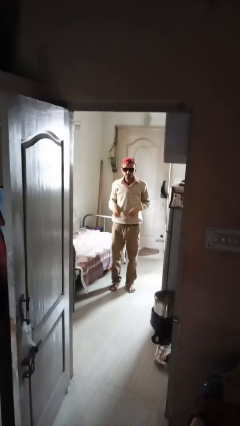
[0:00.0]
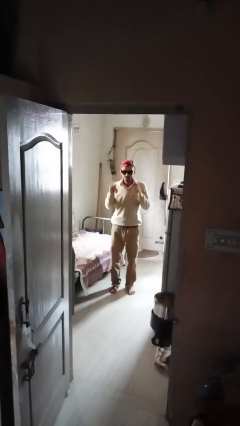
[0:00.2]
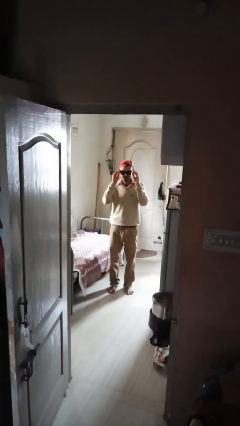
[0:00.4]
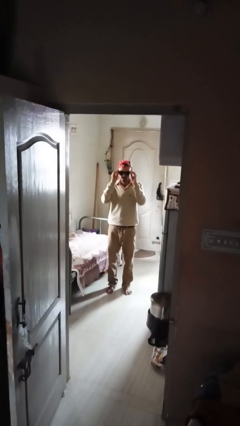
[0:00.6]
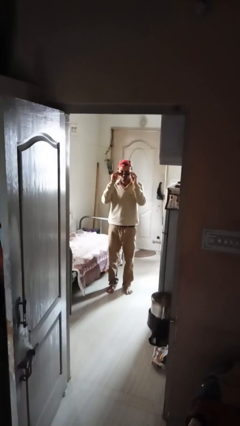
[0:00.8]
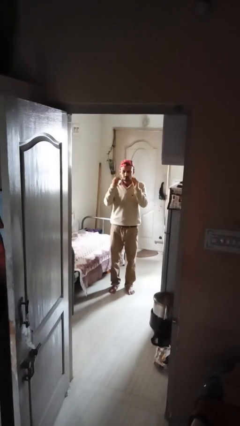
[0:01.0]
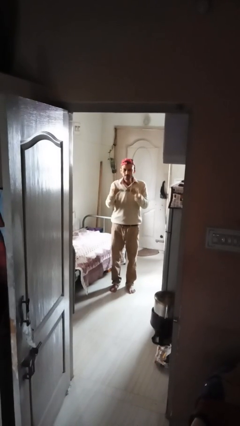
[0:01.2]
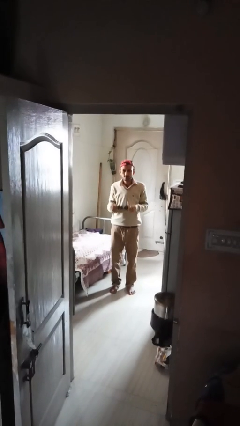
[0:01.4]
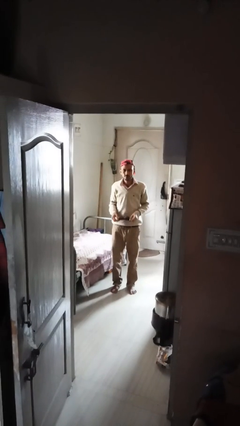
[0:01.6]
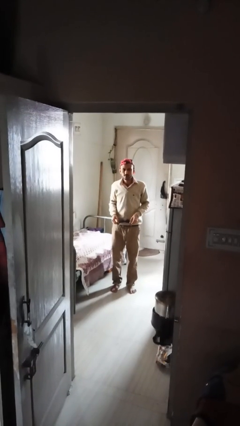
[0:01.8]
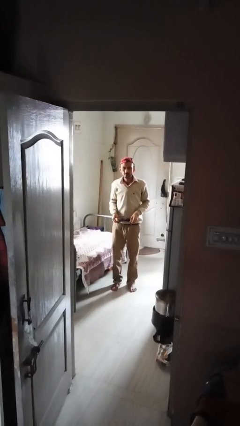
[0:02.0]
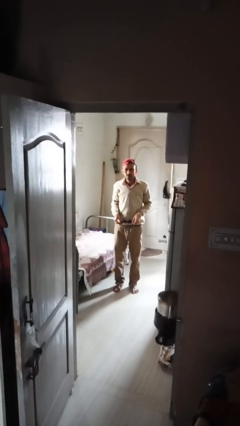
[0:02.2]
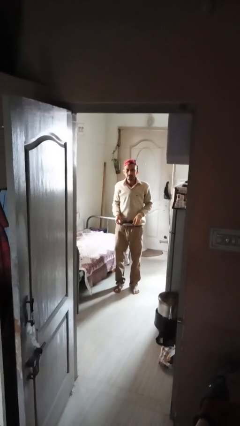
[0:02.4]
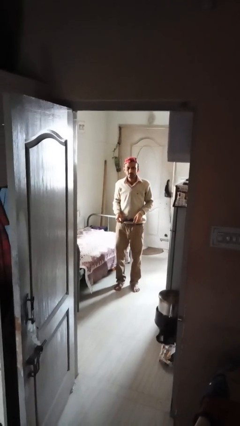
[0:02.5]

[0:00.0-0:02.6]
person takes off sunglasses

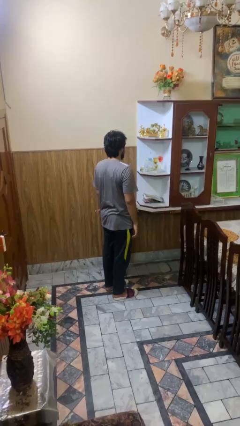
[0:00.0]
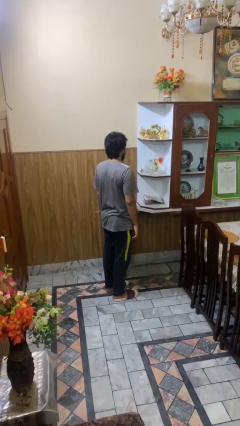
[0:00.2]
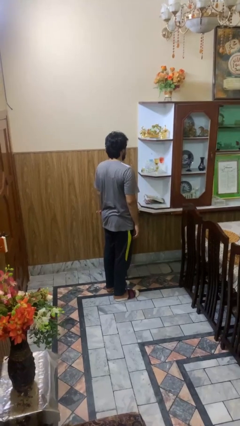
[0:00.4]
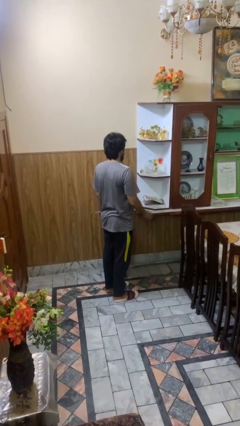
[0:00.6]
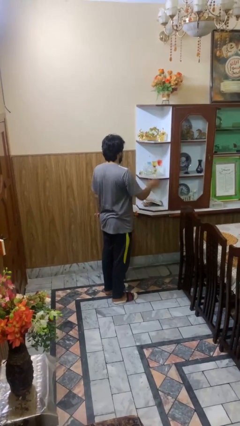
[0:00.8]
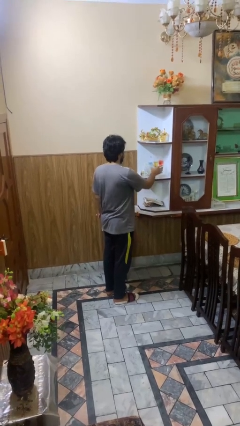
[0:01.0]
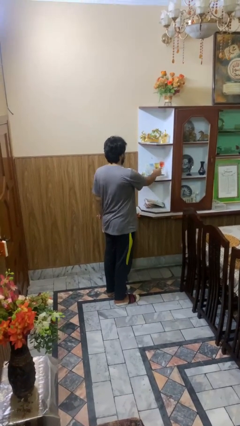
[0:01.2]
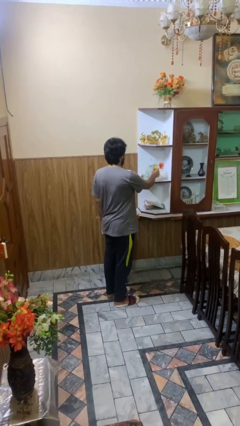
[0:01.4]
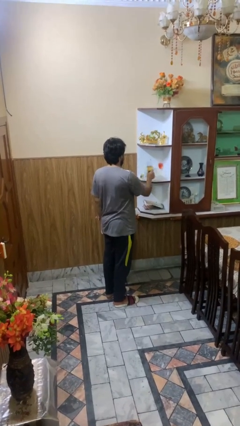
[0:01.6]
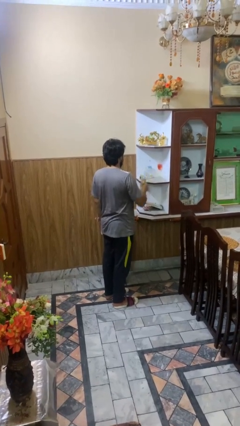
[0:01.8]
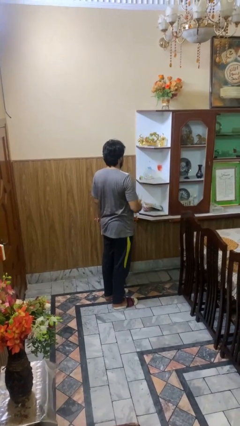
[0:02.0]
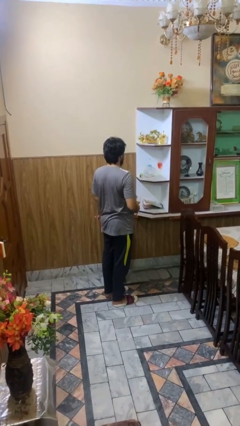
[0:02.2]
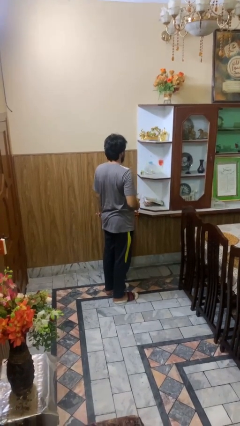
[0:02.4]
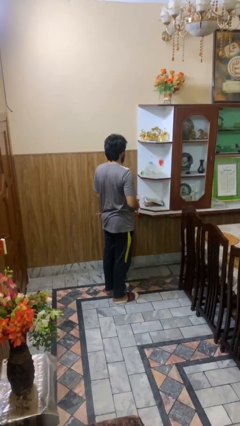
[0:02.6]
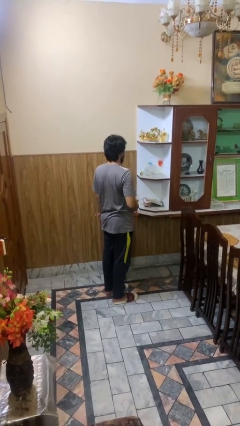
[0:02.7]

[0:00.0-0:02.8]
person picks up object from cabinet

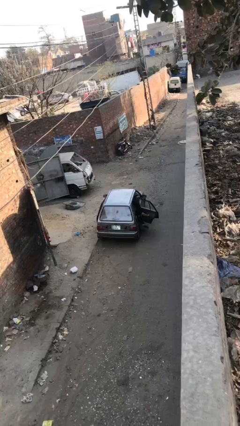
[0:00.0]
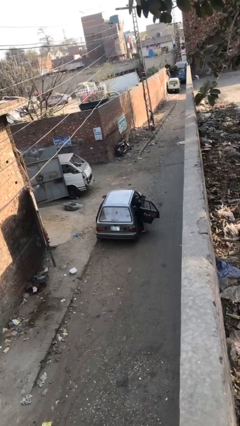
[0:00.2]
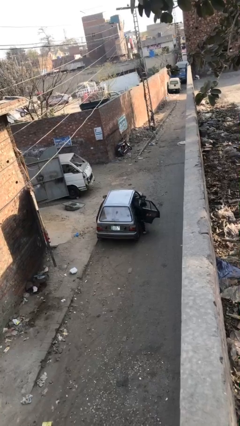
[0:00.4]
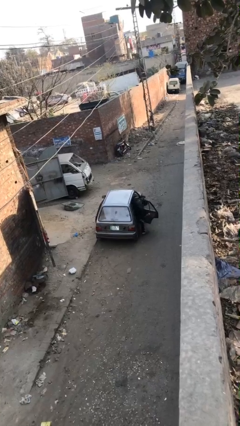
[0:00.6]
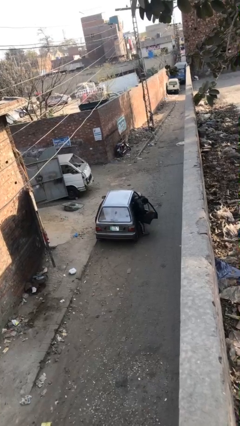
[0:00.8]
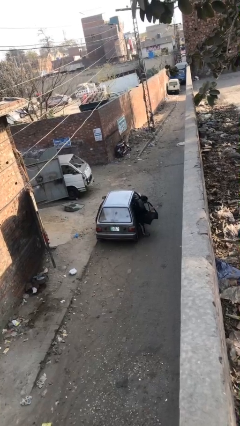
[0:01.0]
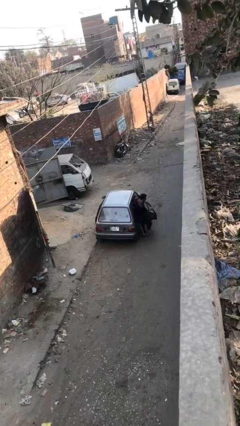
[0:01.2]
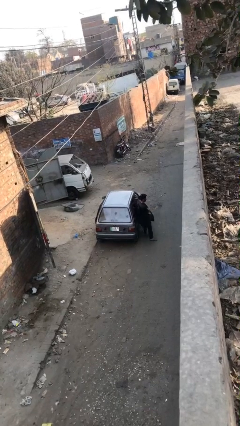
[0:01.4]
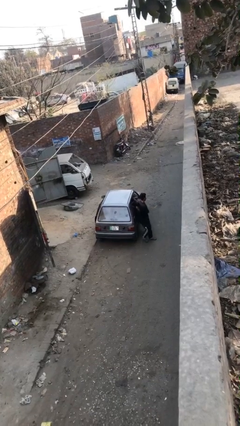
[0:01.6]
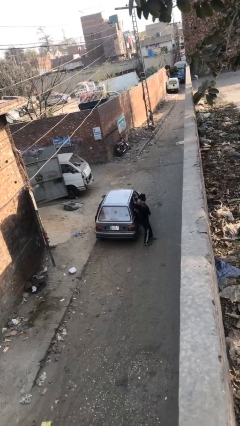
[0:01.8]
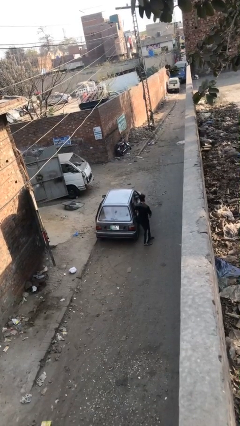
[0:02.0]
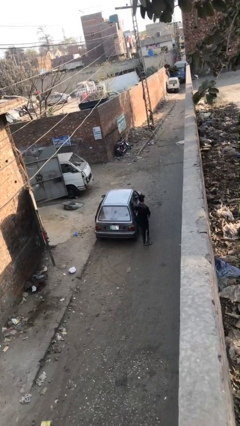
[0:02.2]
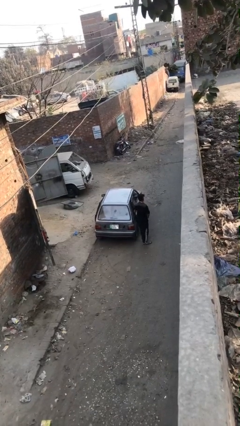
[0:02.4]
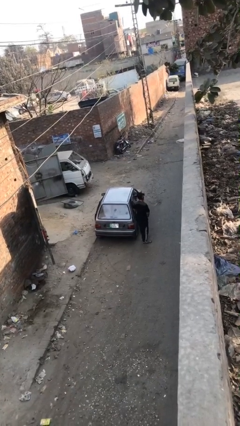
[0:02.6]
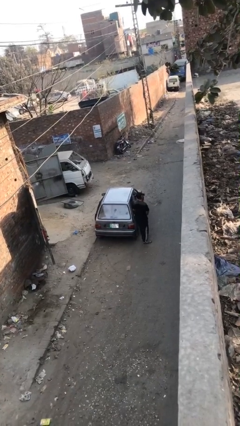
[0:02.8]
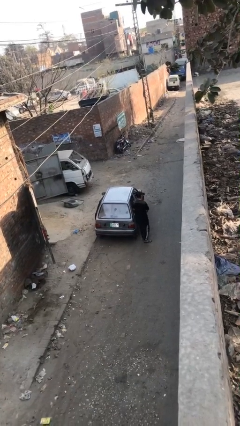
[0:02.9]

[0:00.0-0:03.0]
car drops off person

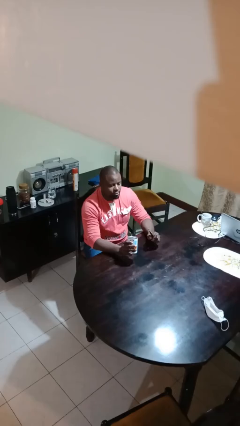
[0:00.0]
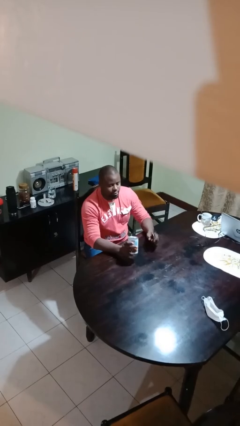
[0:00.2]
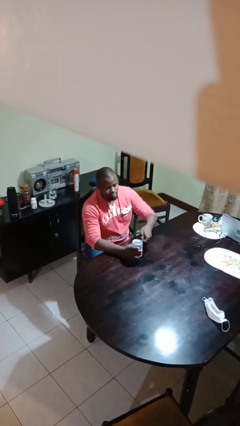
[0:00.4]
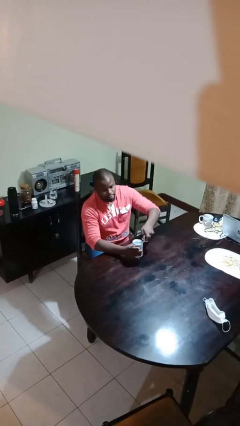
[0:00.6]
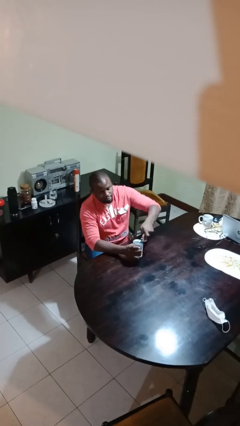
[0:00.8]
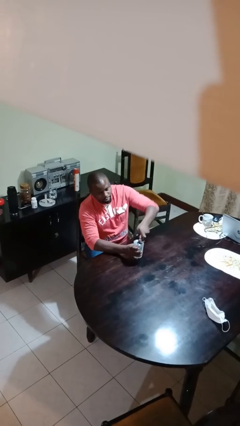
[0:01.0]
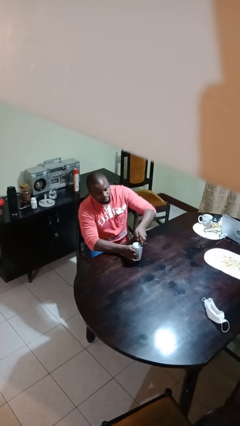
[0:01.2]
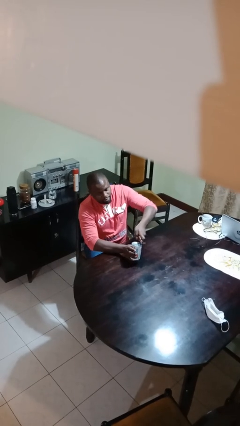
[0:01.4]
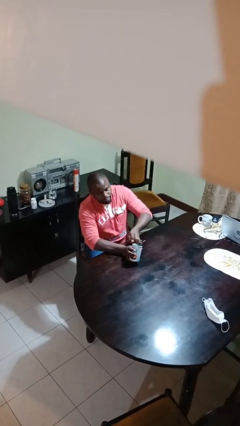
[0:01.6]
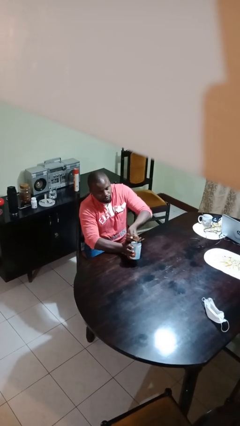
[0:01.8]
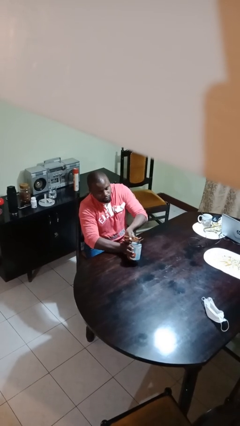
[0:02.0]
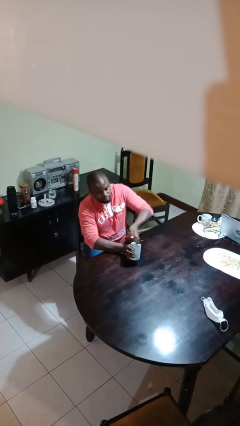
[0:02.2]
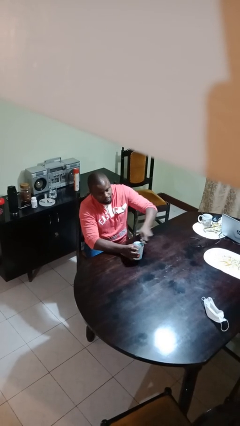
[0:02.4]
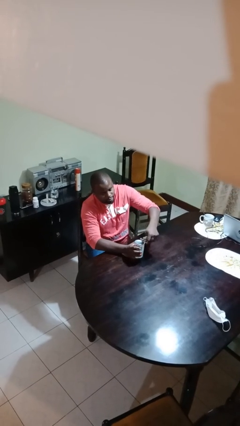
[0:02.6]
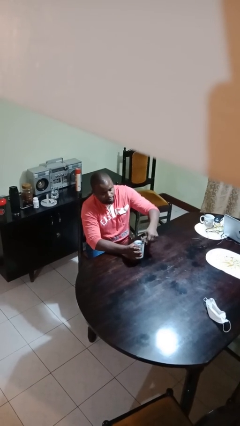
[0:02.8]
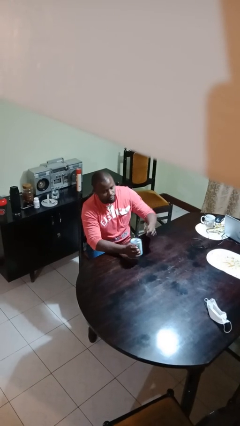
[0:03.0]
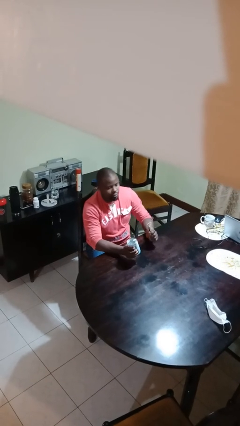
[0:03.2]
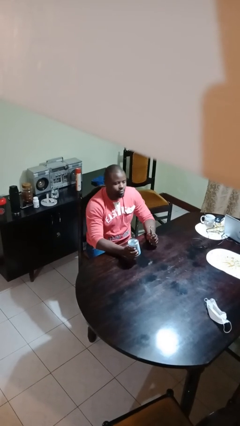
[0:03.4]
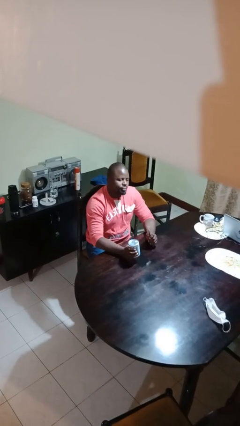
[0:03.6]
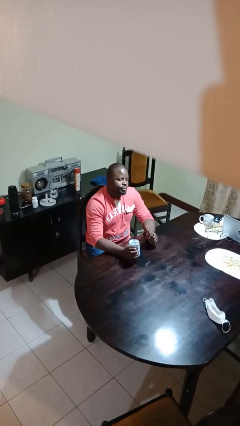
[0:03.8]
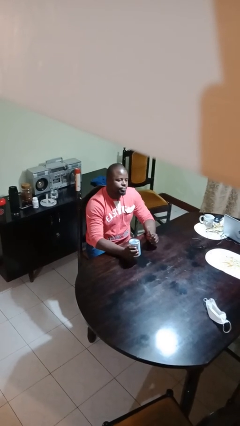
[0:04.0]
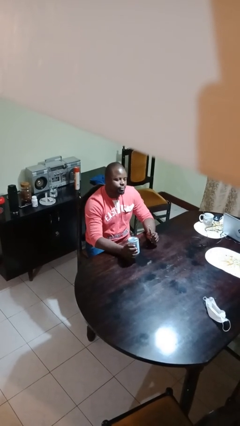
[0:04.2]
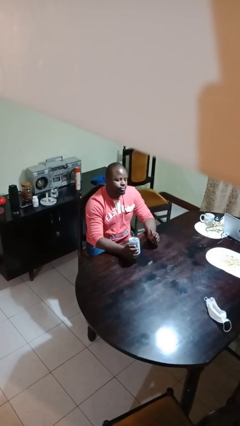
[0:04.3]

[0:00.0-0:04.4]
person opens can with can opener

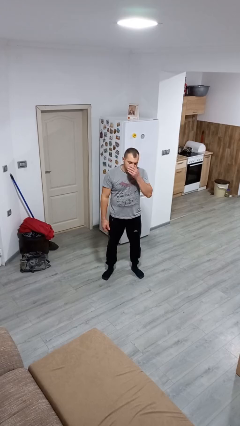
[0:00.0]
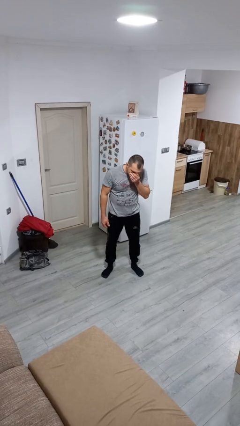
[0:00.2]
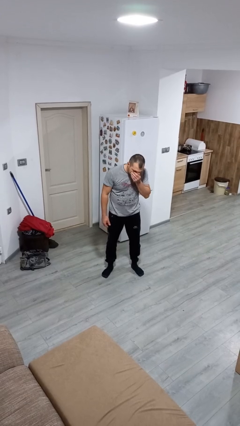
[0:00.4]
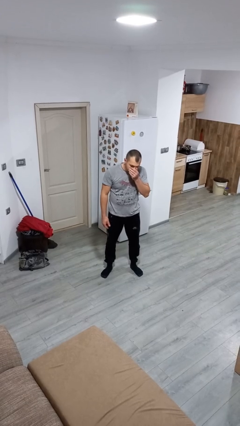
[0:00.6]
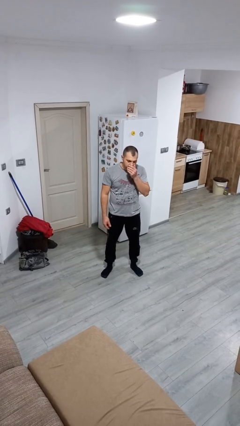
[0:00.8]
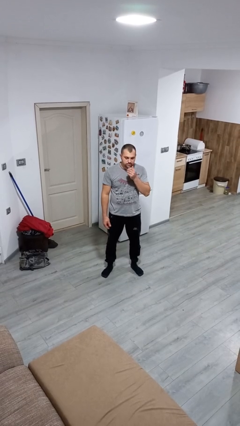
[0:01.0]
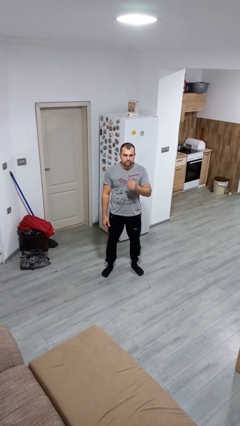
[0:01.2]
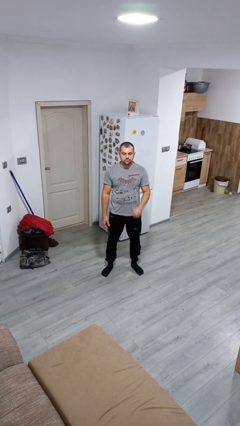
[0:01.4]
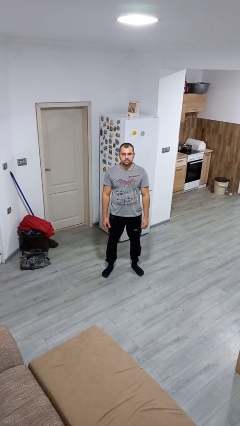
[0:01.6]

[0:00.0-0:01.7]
person sneezes into hand

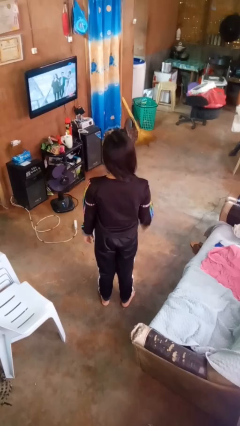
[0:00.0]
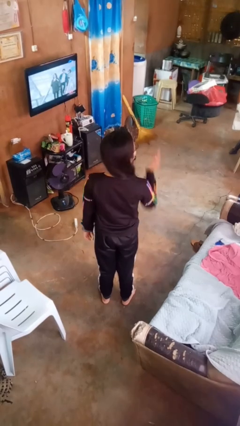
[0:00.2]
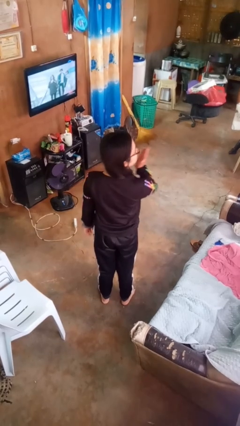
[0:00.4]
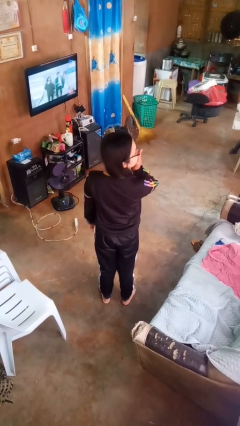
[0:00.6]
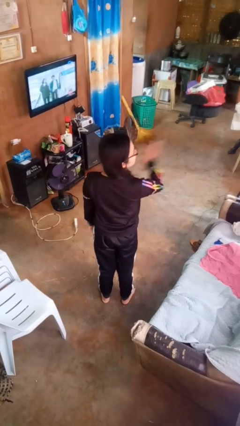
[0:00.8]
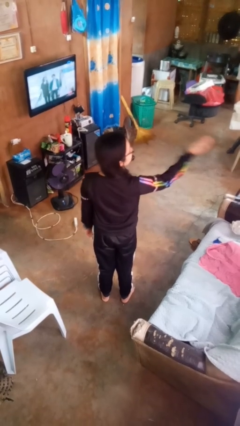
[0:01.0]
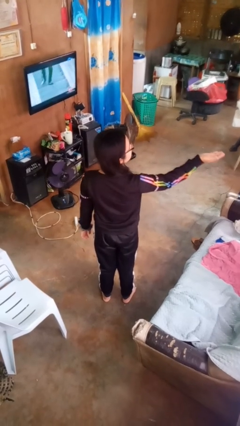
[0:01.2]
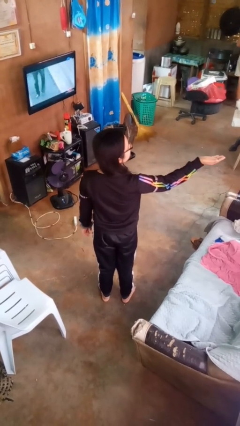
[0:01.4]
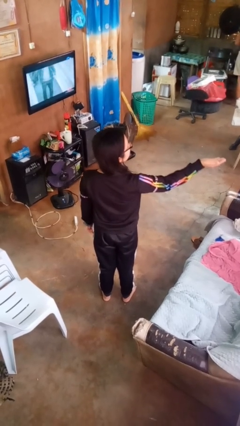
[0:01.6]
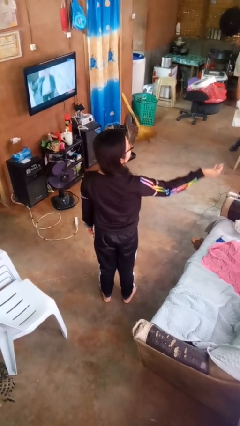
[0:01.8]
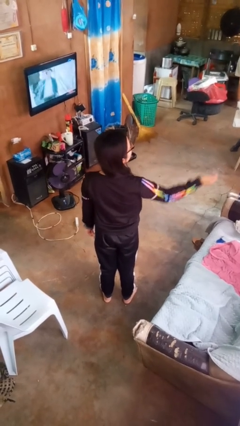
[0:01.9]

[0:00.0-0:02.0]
person gestures blow kiss

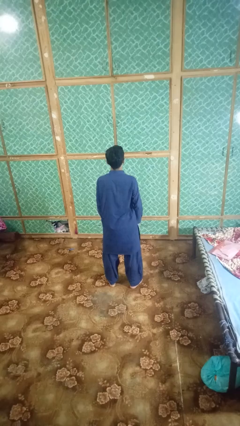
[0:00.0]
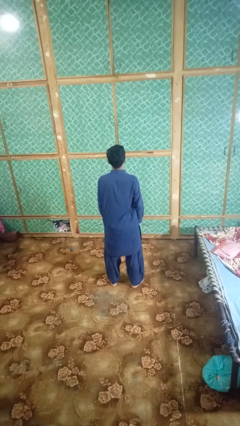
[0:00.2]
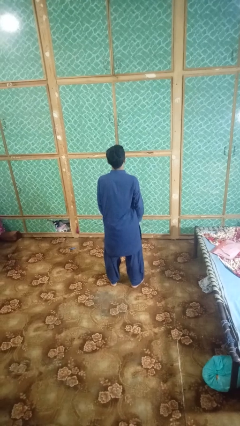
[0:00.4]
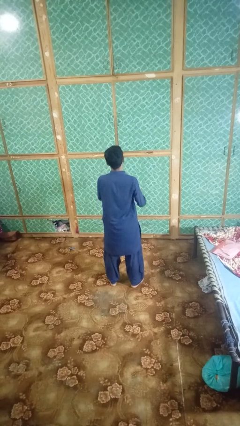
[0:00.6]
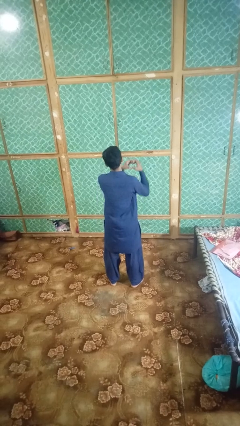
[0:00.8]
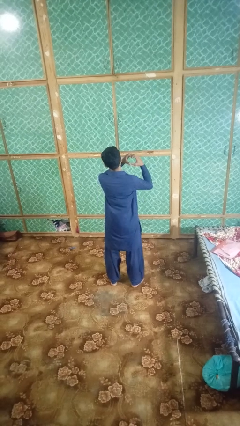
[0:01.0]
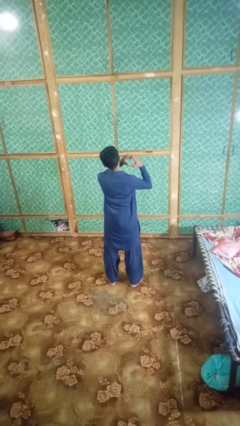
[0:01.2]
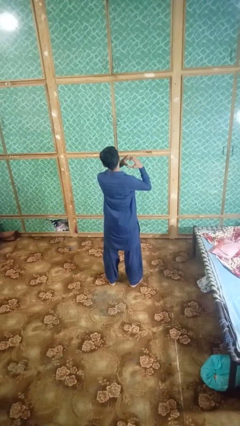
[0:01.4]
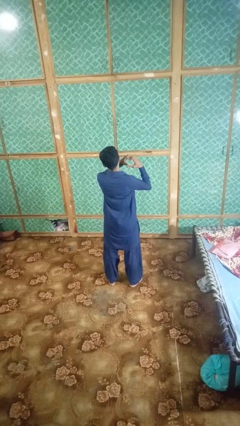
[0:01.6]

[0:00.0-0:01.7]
person gestures heart
